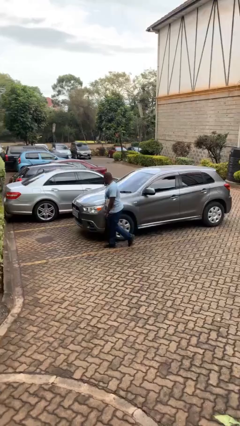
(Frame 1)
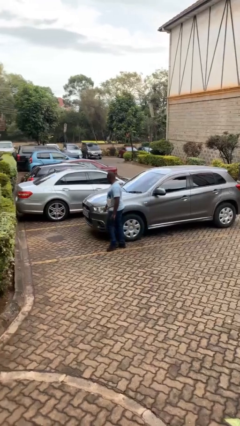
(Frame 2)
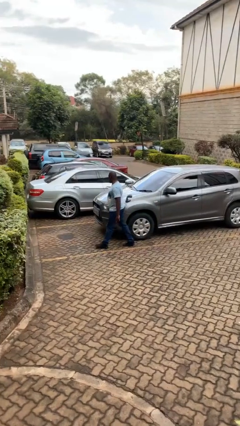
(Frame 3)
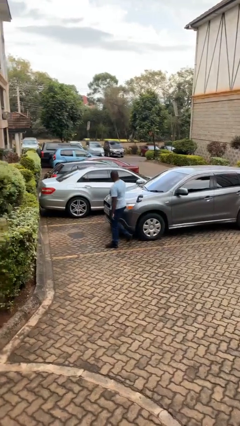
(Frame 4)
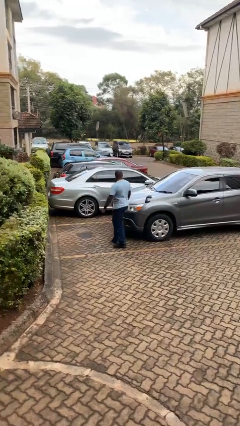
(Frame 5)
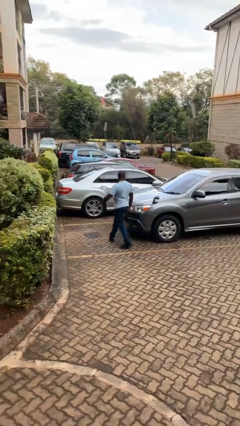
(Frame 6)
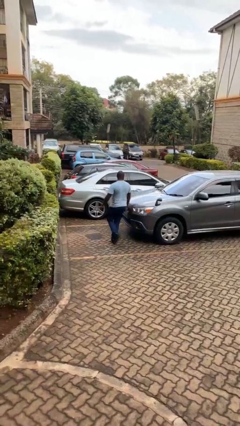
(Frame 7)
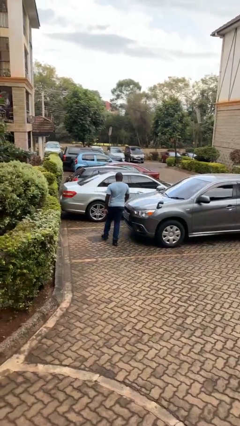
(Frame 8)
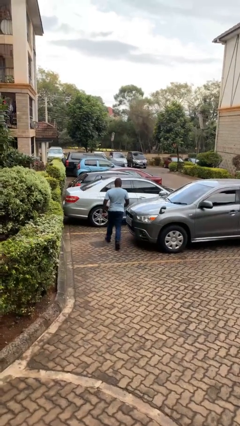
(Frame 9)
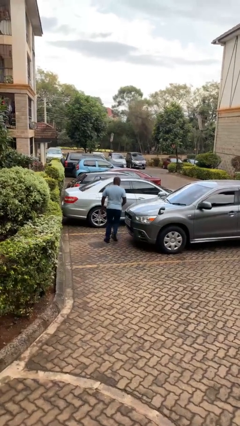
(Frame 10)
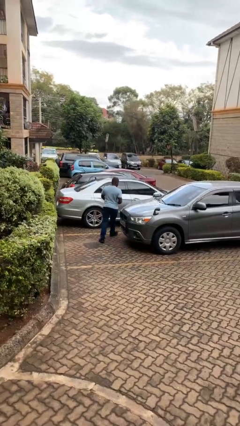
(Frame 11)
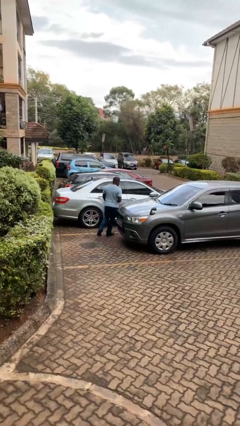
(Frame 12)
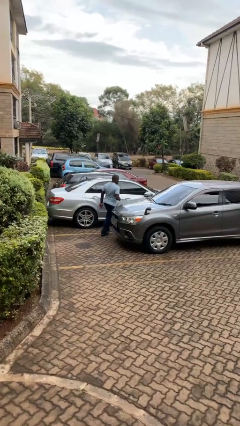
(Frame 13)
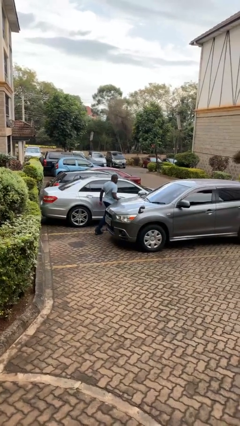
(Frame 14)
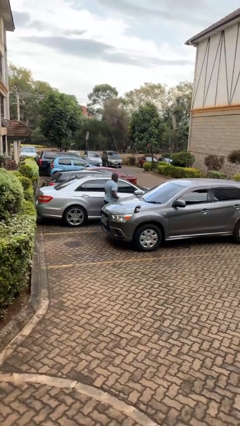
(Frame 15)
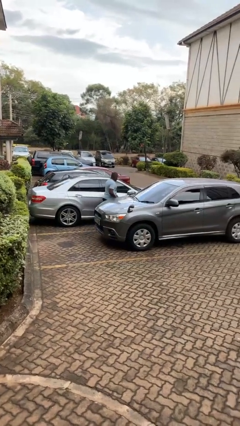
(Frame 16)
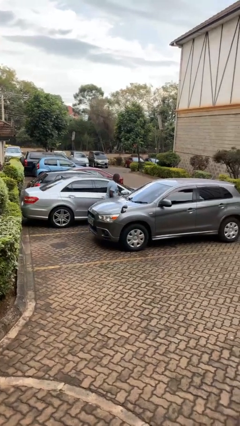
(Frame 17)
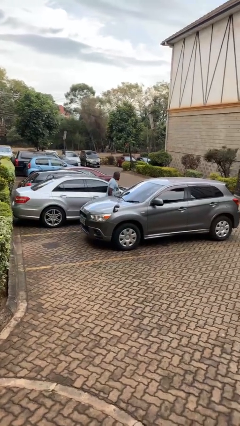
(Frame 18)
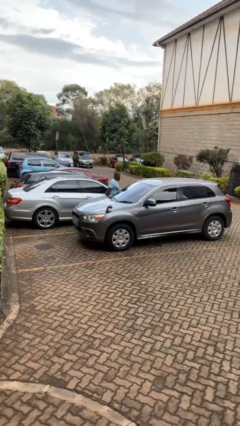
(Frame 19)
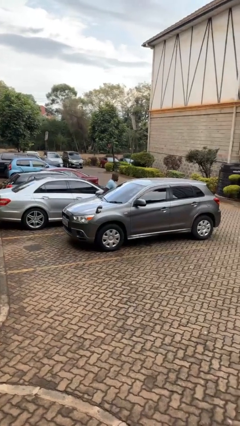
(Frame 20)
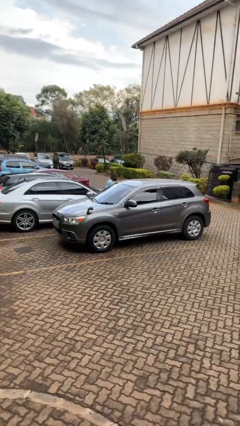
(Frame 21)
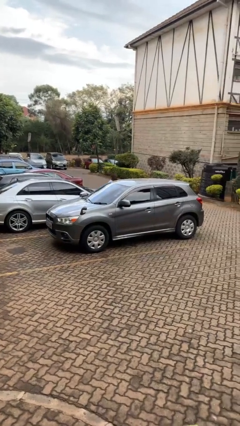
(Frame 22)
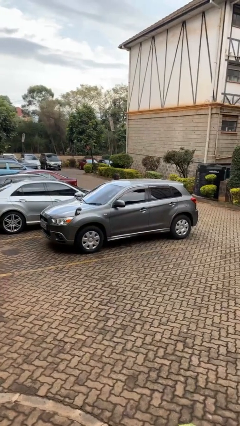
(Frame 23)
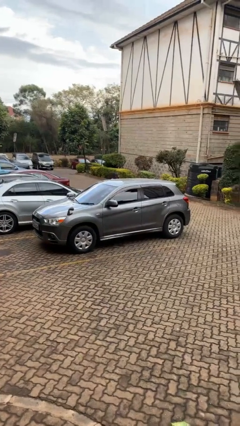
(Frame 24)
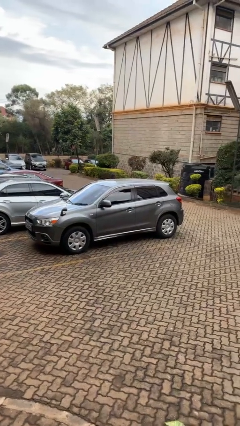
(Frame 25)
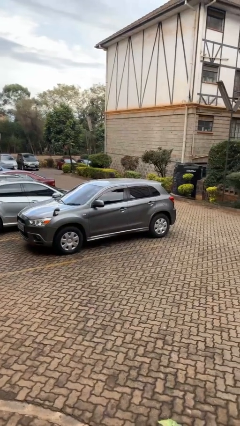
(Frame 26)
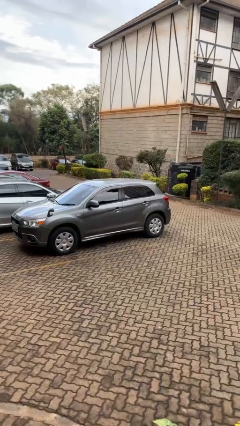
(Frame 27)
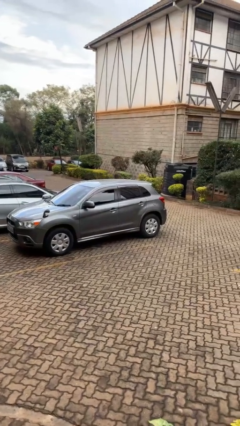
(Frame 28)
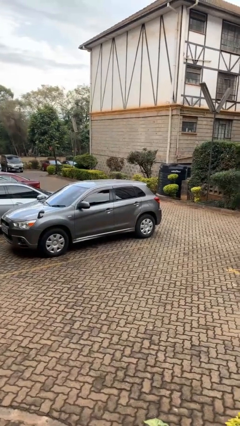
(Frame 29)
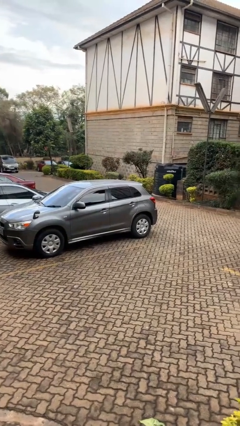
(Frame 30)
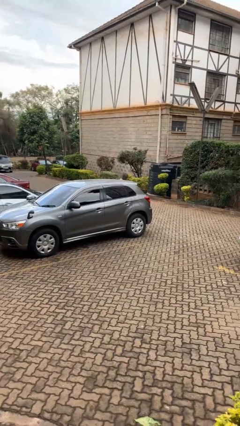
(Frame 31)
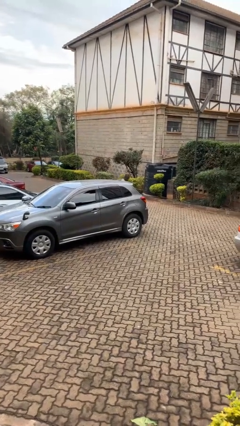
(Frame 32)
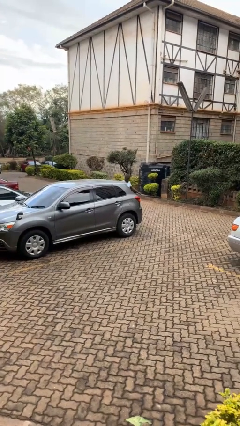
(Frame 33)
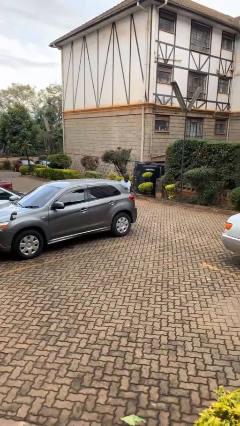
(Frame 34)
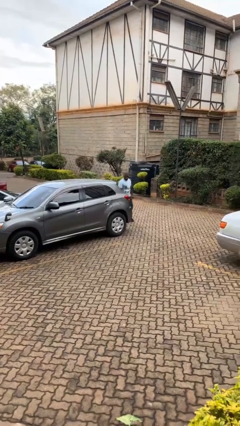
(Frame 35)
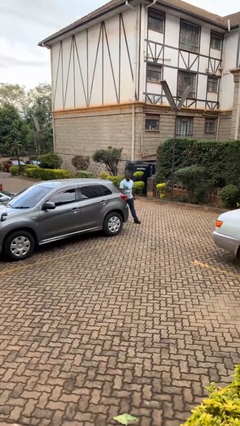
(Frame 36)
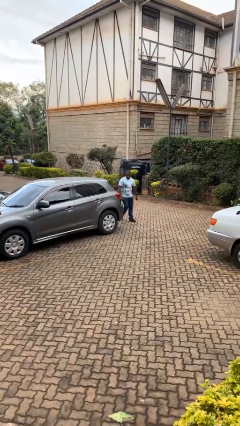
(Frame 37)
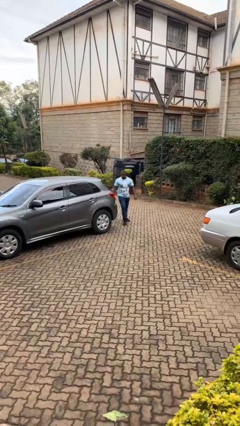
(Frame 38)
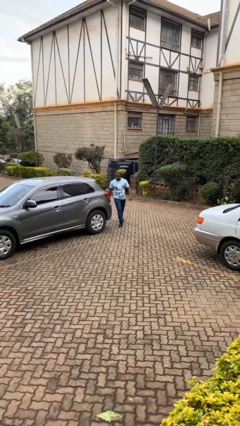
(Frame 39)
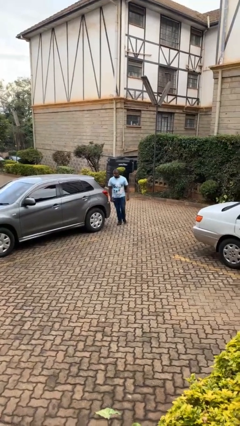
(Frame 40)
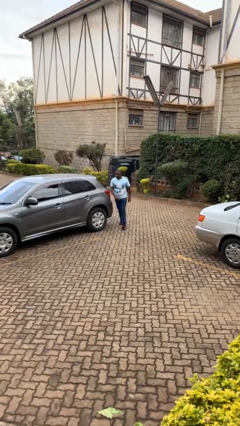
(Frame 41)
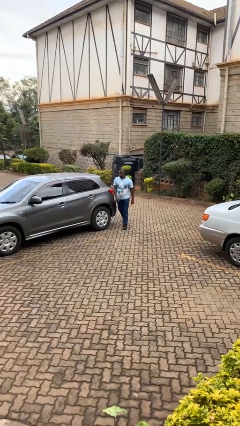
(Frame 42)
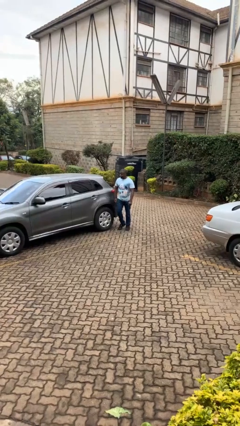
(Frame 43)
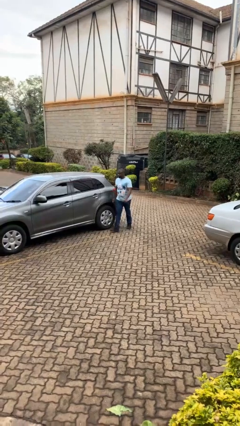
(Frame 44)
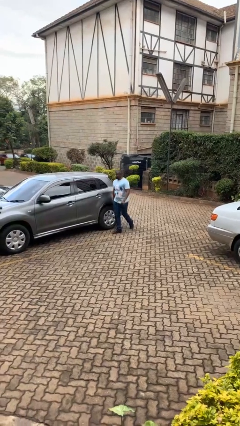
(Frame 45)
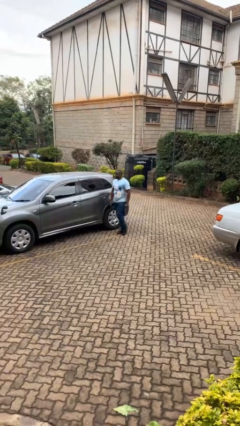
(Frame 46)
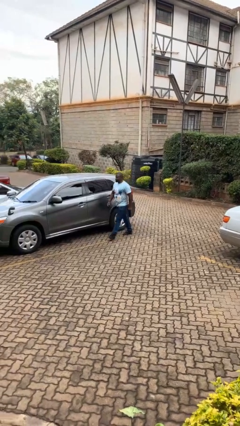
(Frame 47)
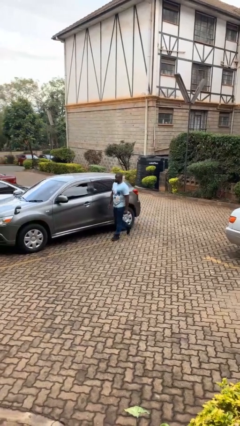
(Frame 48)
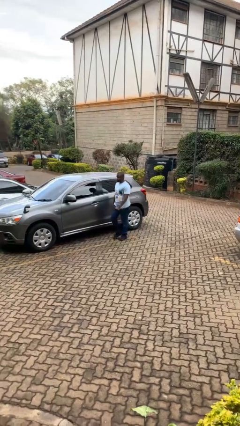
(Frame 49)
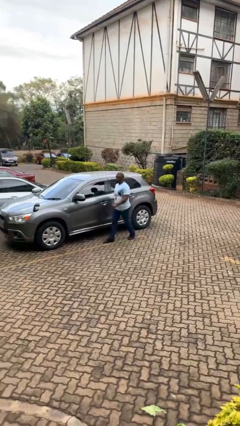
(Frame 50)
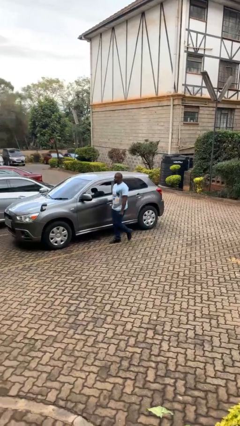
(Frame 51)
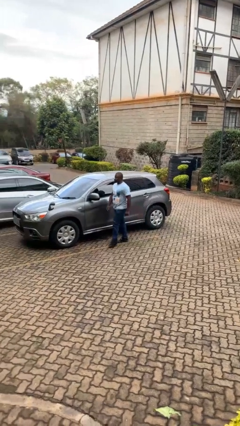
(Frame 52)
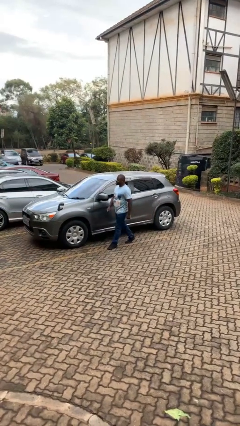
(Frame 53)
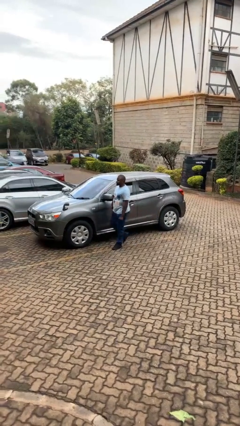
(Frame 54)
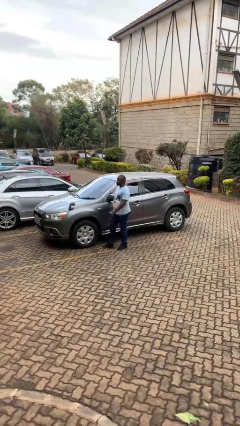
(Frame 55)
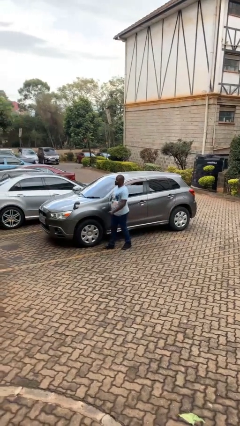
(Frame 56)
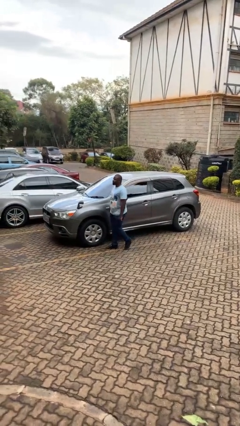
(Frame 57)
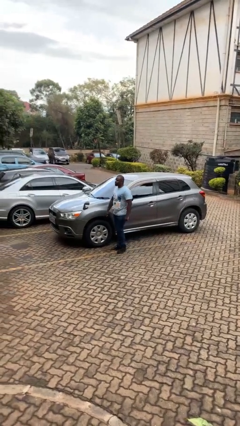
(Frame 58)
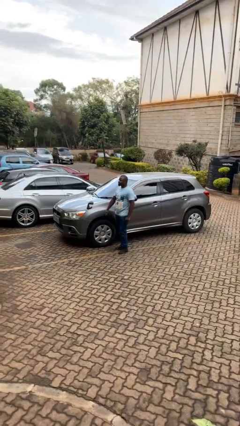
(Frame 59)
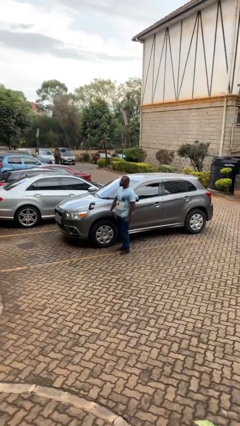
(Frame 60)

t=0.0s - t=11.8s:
person walks around car

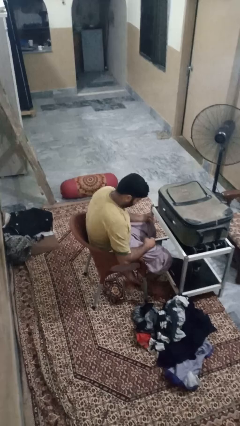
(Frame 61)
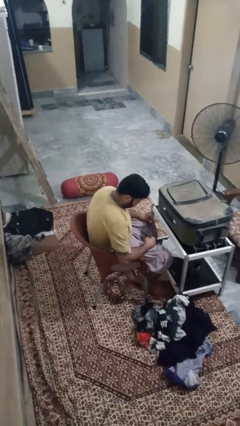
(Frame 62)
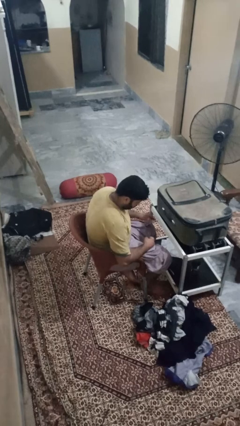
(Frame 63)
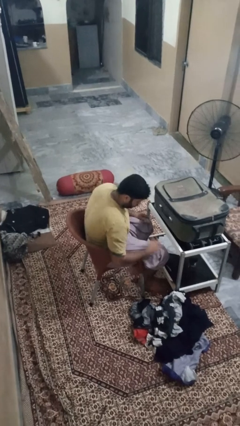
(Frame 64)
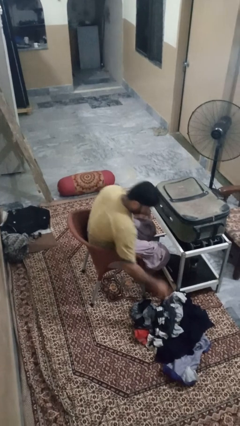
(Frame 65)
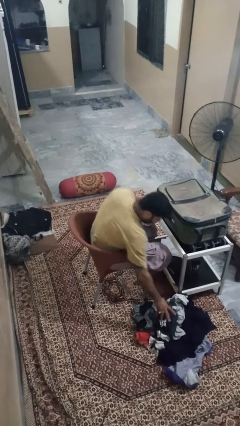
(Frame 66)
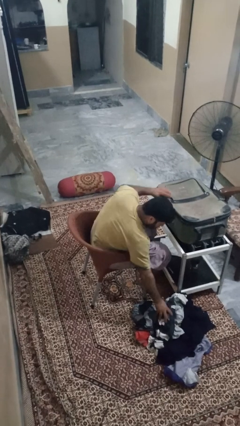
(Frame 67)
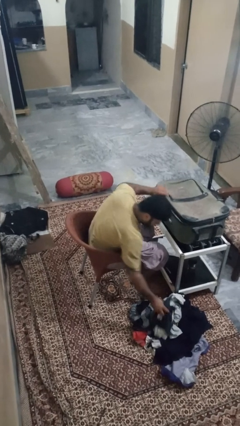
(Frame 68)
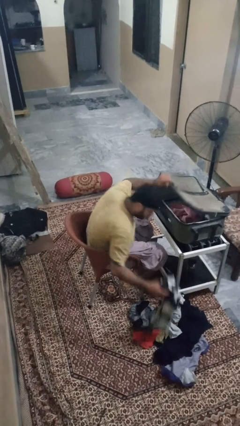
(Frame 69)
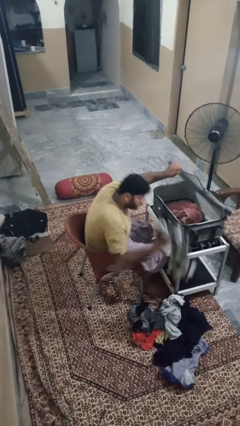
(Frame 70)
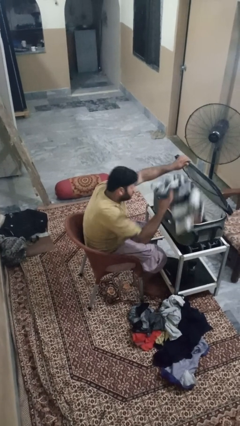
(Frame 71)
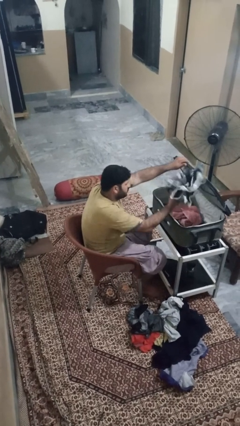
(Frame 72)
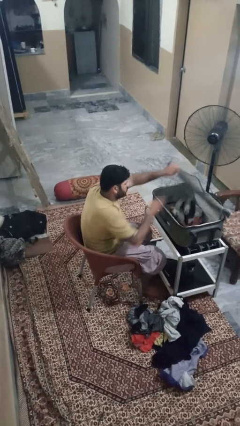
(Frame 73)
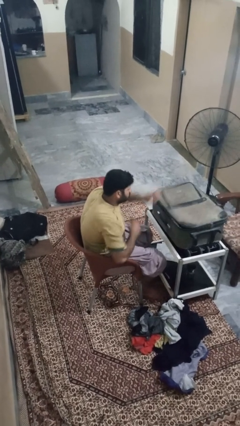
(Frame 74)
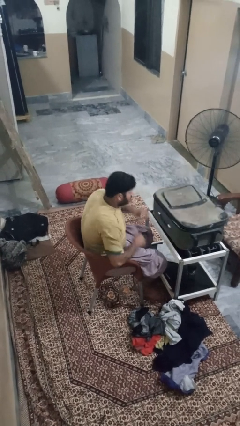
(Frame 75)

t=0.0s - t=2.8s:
person loads clothes into suitcase

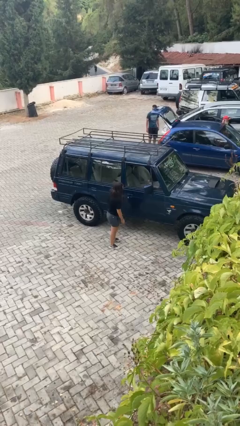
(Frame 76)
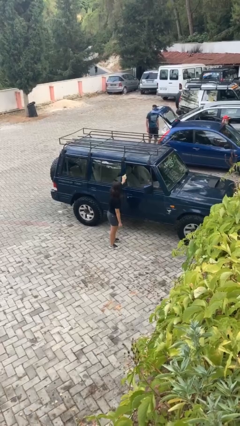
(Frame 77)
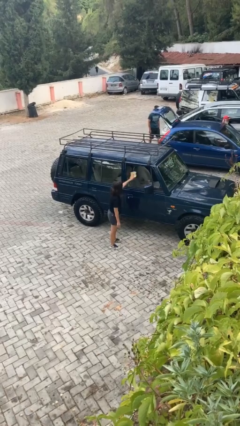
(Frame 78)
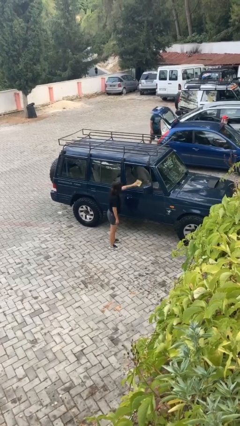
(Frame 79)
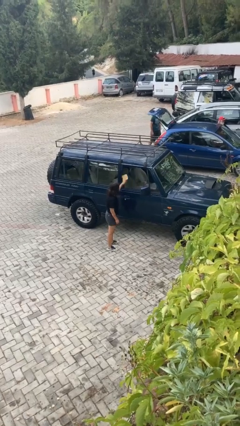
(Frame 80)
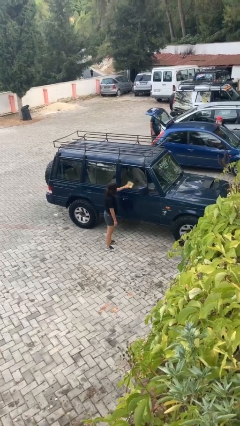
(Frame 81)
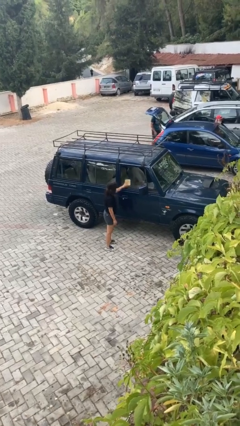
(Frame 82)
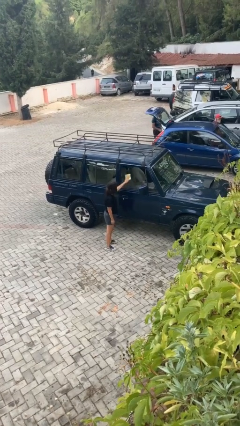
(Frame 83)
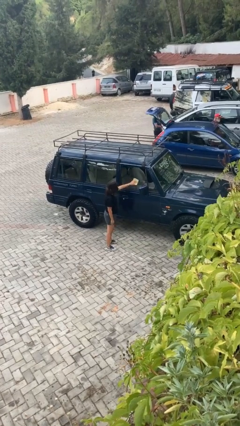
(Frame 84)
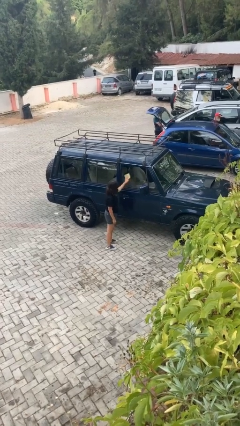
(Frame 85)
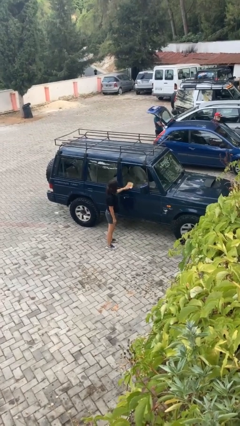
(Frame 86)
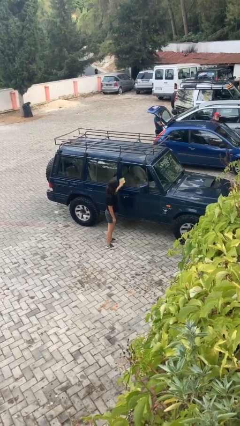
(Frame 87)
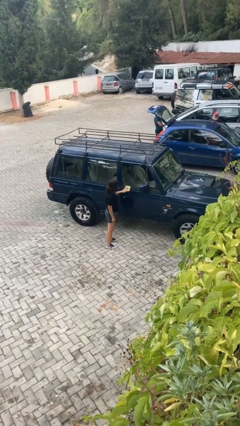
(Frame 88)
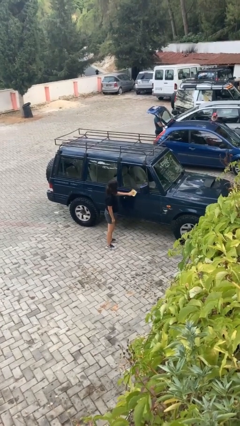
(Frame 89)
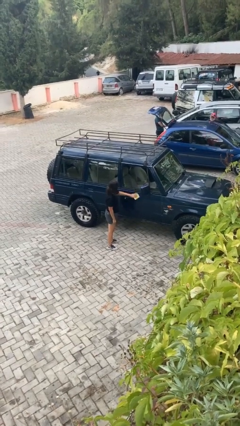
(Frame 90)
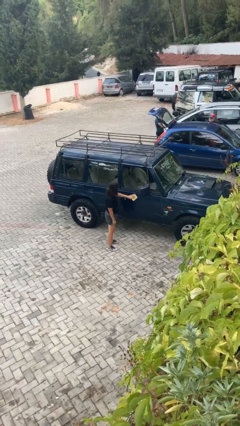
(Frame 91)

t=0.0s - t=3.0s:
person polishes car with rag

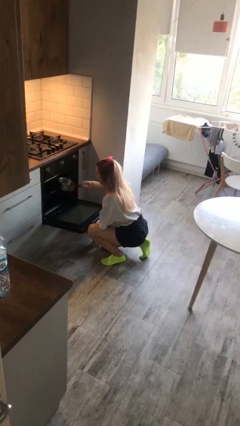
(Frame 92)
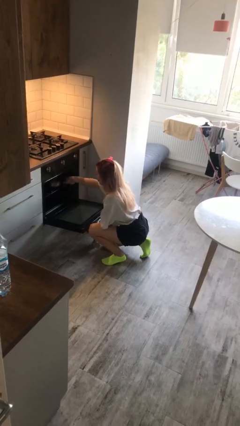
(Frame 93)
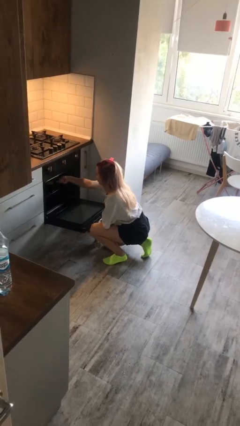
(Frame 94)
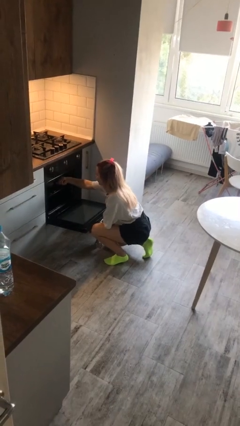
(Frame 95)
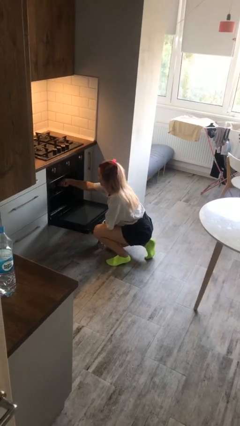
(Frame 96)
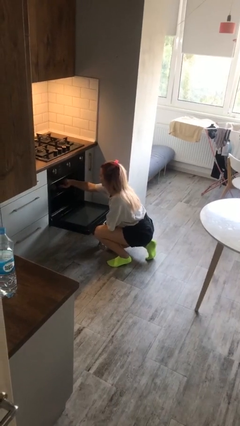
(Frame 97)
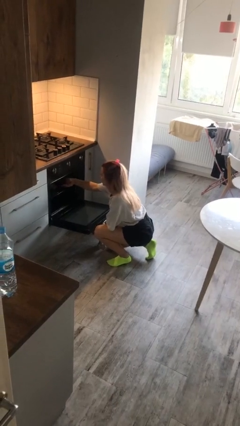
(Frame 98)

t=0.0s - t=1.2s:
person puts object into oven
